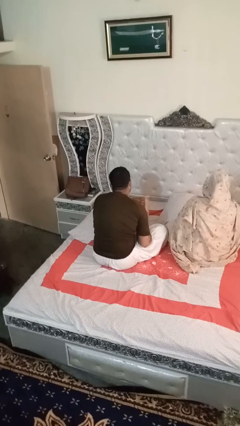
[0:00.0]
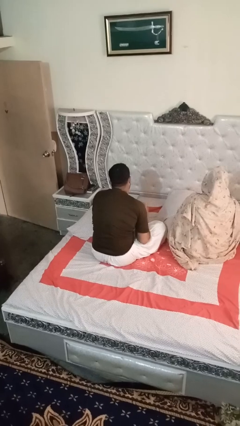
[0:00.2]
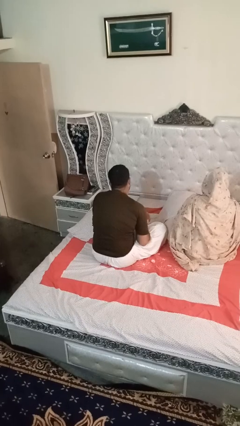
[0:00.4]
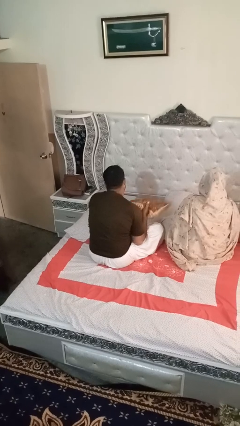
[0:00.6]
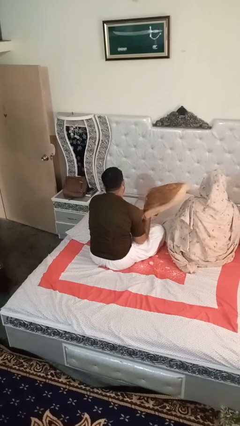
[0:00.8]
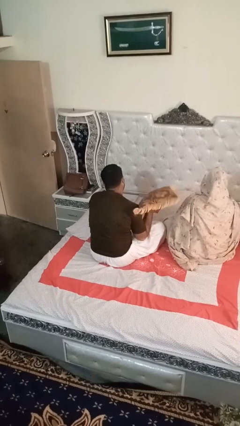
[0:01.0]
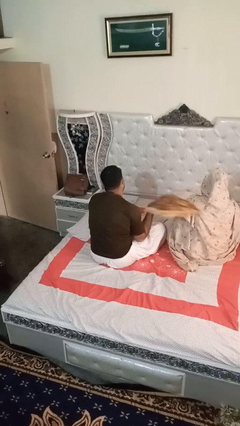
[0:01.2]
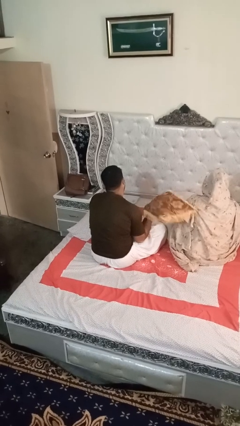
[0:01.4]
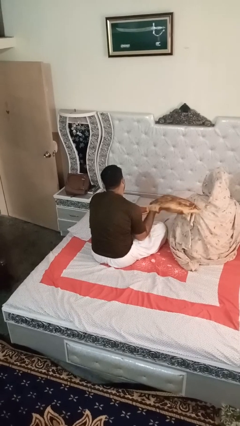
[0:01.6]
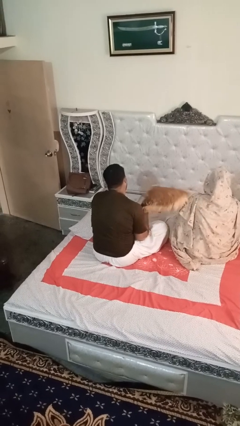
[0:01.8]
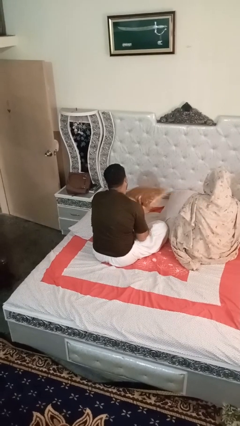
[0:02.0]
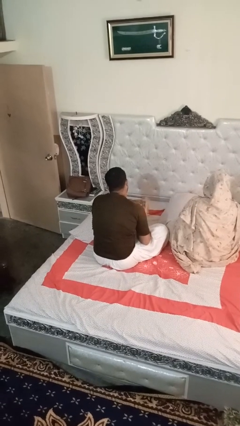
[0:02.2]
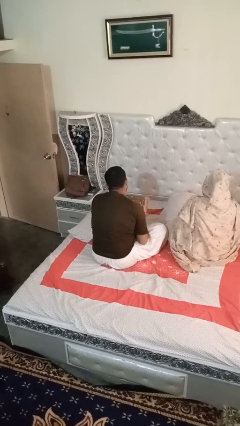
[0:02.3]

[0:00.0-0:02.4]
person hits person with pillow

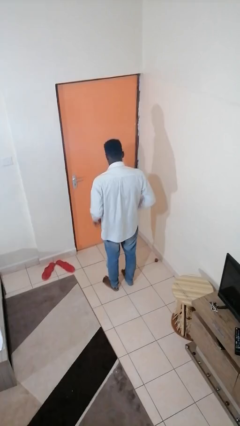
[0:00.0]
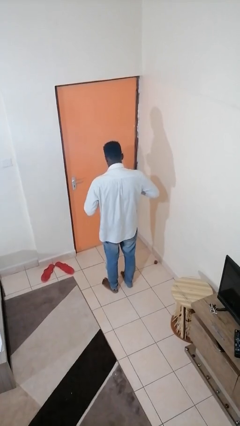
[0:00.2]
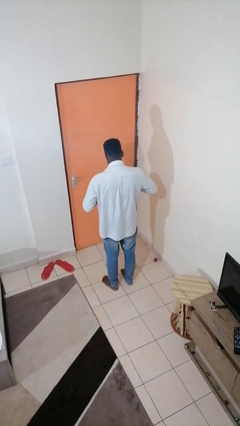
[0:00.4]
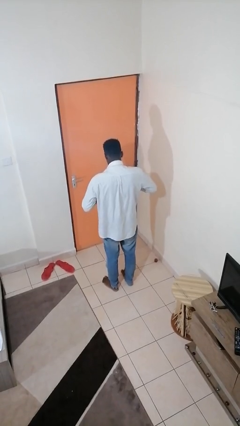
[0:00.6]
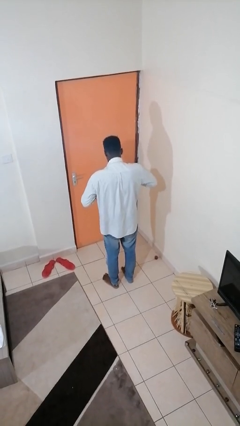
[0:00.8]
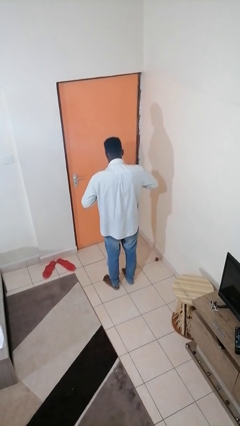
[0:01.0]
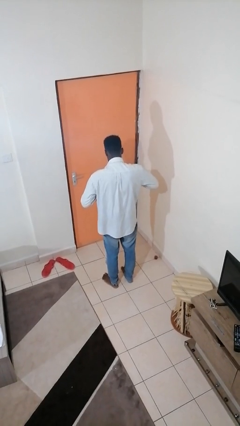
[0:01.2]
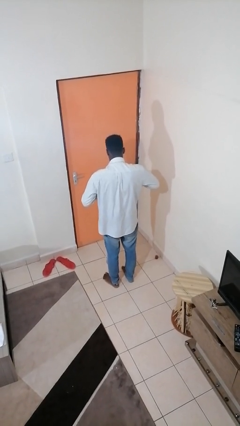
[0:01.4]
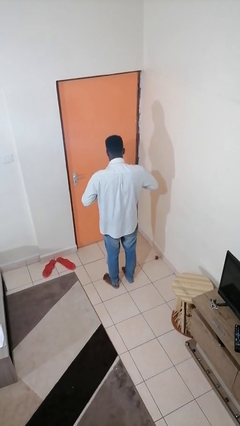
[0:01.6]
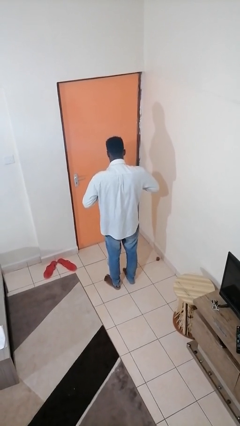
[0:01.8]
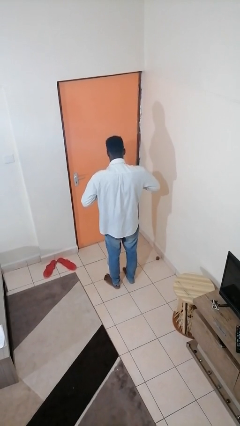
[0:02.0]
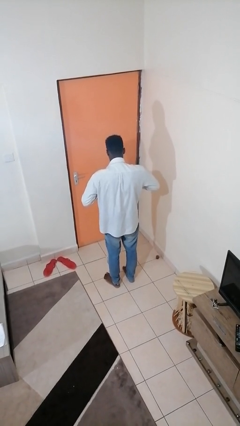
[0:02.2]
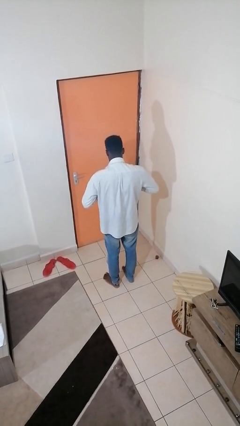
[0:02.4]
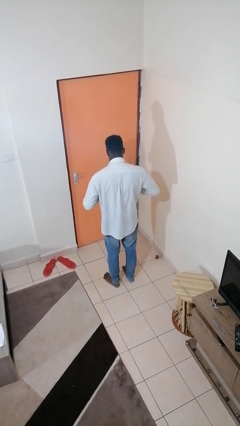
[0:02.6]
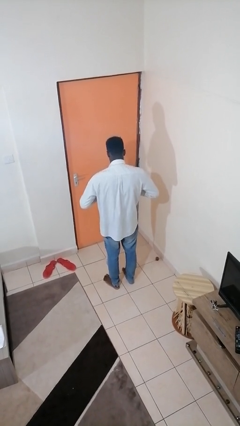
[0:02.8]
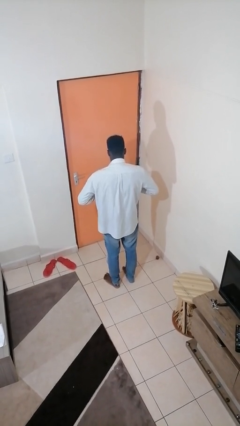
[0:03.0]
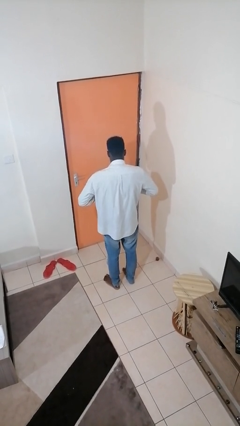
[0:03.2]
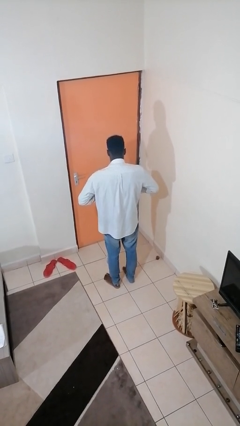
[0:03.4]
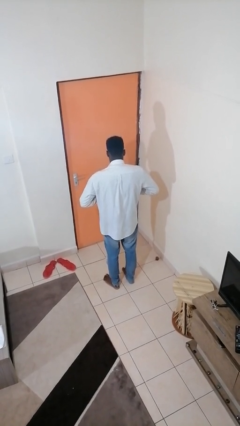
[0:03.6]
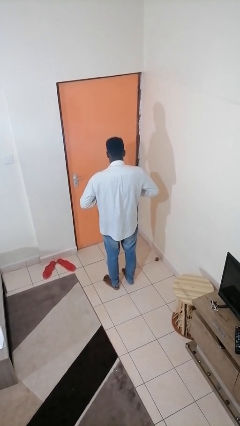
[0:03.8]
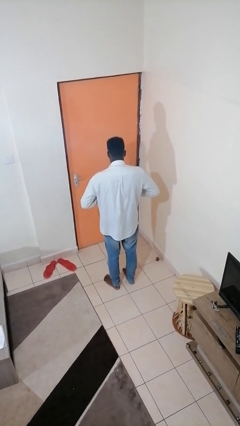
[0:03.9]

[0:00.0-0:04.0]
person buttons shirt

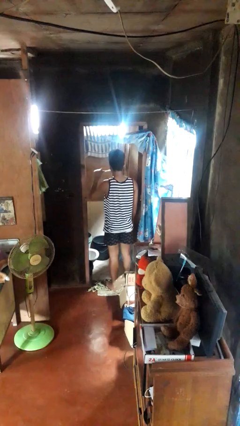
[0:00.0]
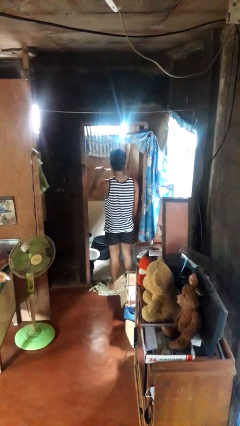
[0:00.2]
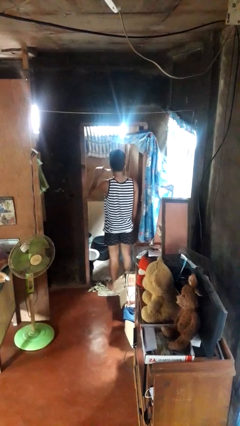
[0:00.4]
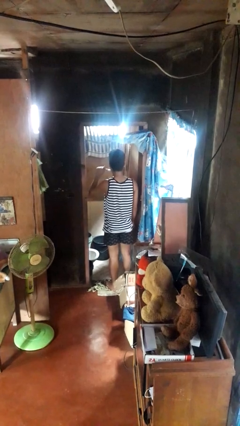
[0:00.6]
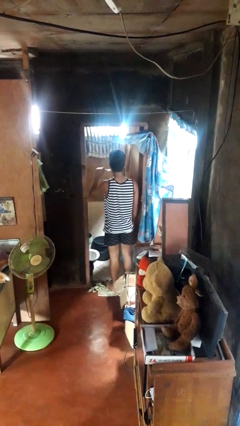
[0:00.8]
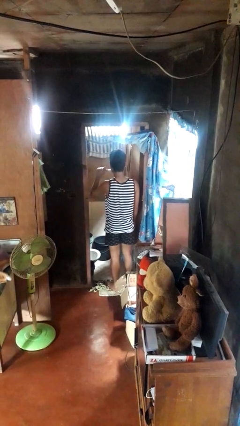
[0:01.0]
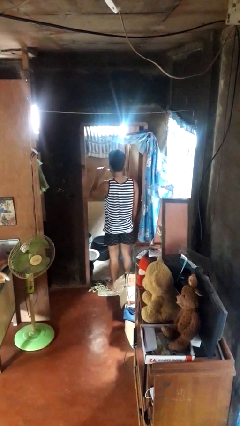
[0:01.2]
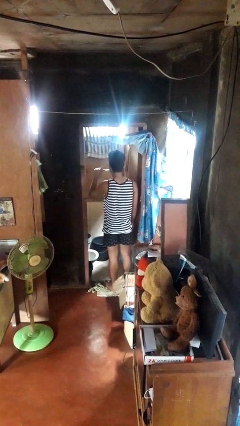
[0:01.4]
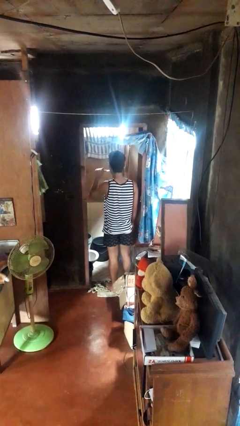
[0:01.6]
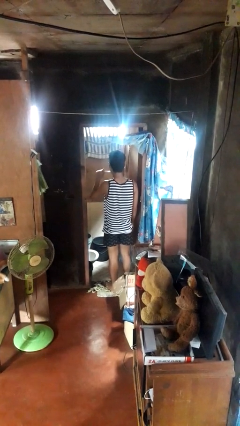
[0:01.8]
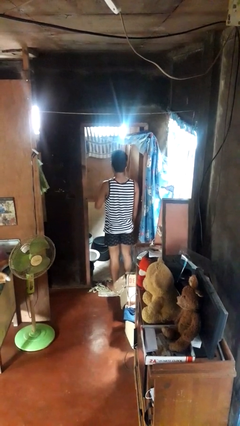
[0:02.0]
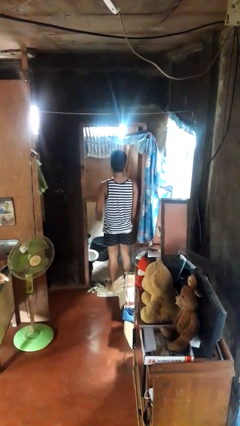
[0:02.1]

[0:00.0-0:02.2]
person brushes teeth

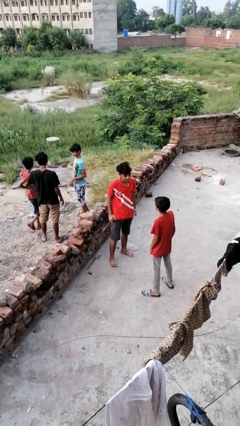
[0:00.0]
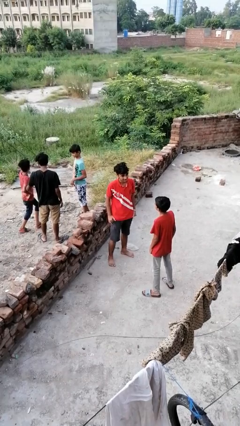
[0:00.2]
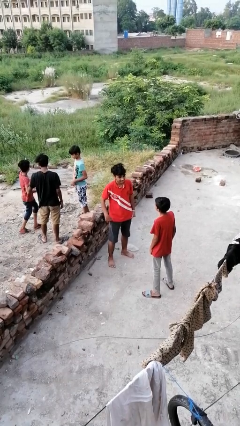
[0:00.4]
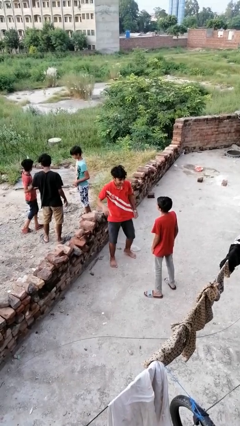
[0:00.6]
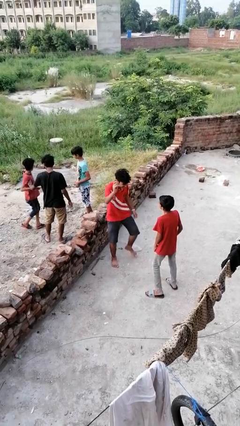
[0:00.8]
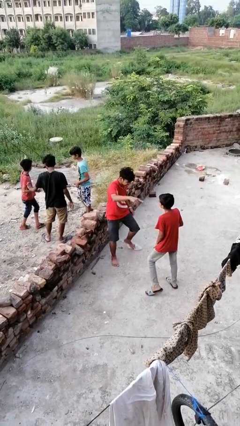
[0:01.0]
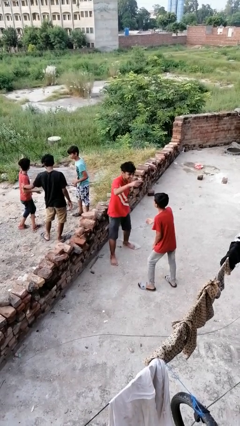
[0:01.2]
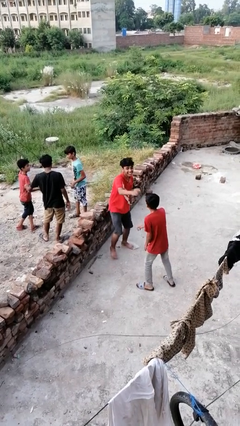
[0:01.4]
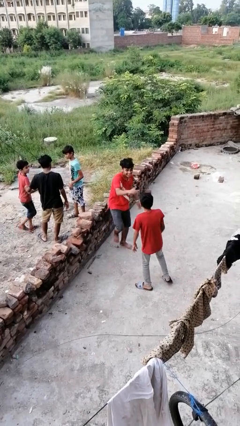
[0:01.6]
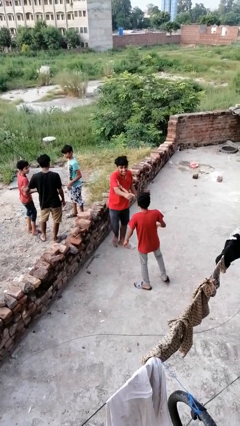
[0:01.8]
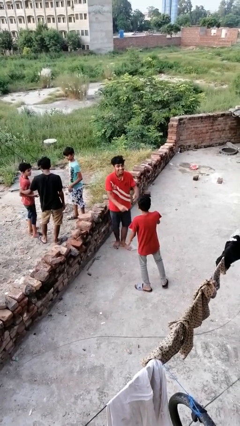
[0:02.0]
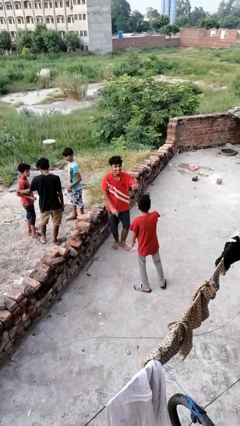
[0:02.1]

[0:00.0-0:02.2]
person laughs with person

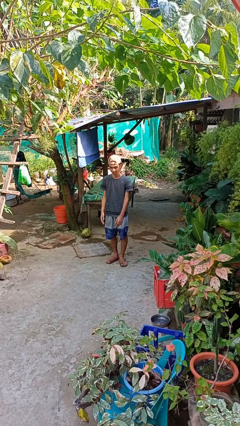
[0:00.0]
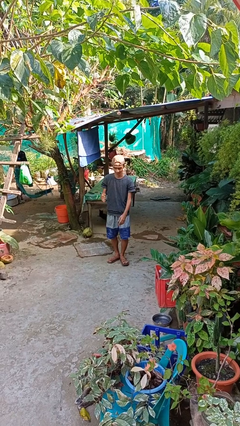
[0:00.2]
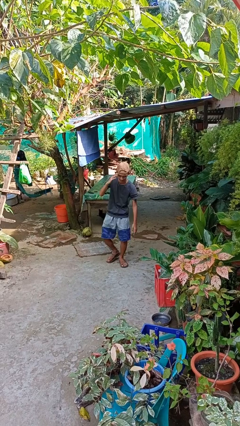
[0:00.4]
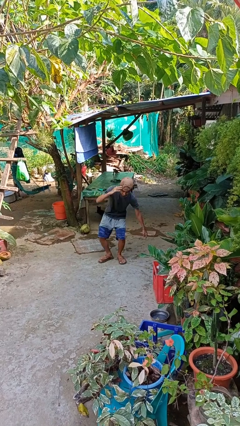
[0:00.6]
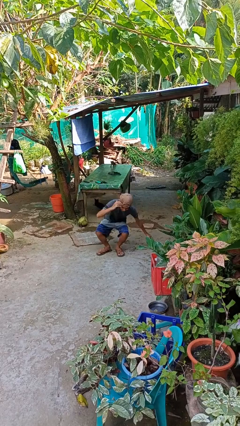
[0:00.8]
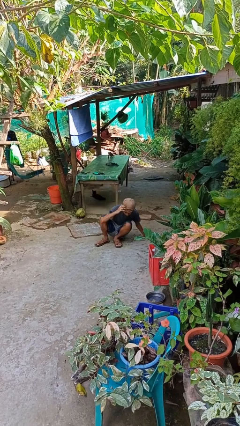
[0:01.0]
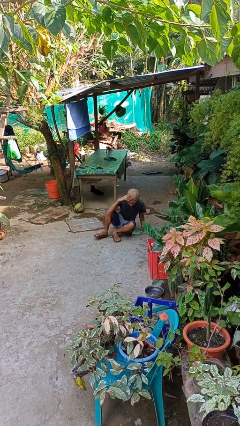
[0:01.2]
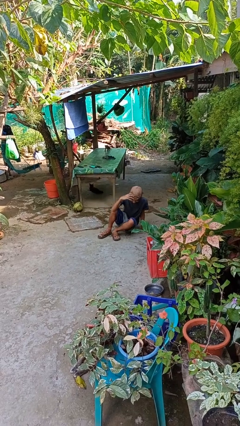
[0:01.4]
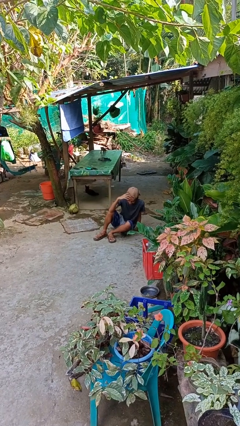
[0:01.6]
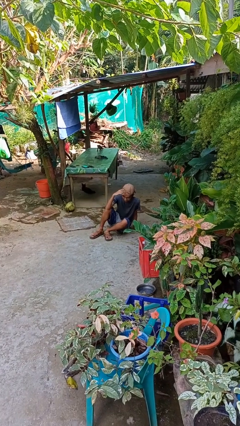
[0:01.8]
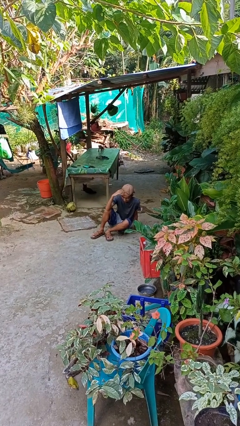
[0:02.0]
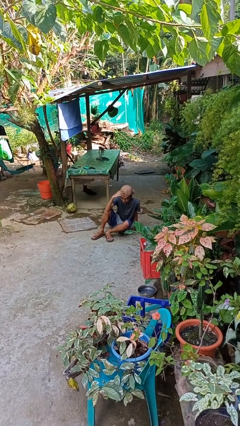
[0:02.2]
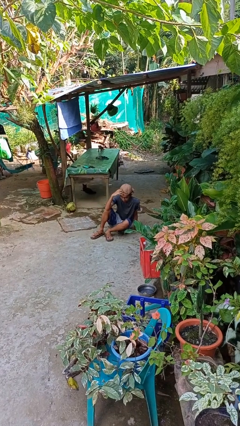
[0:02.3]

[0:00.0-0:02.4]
person falls while standing

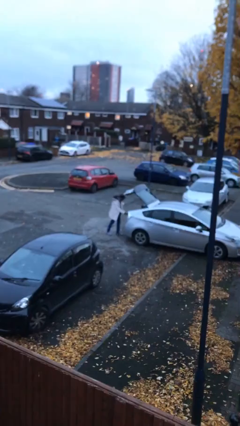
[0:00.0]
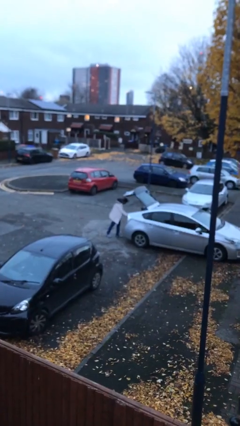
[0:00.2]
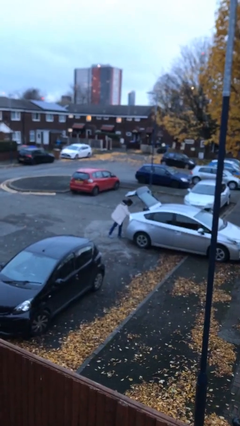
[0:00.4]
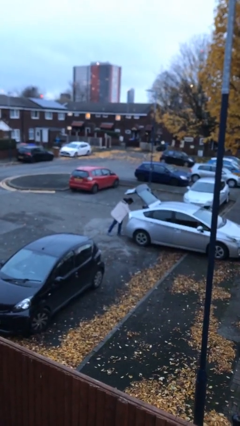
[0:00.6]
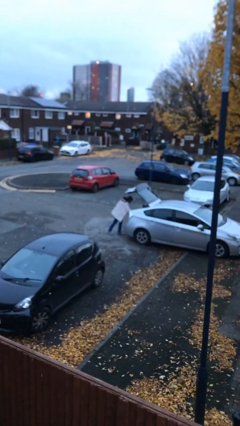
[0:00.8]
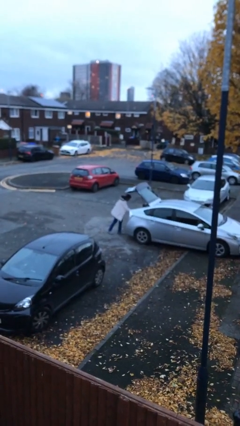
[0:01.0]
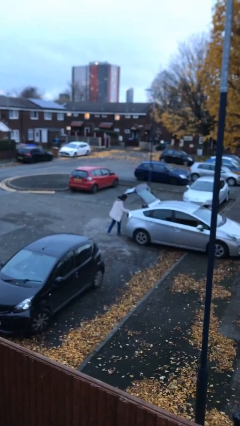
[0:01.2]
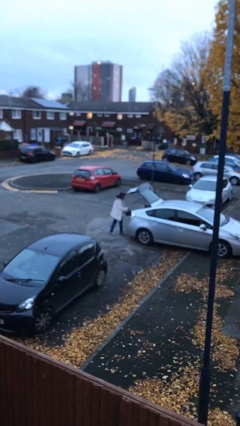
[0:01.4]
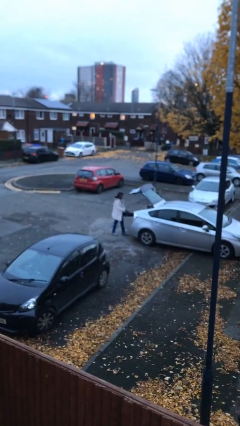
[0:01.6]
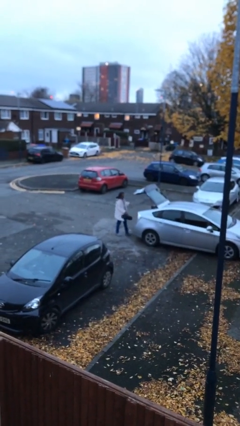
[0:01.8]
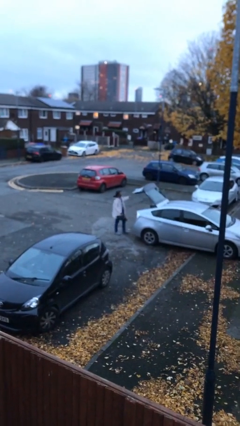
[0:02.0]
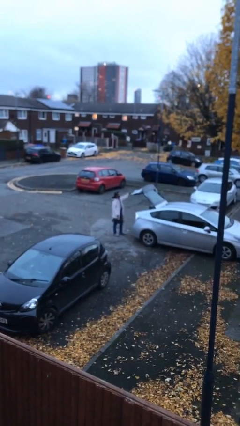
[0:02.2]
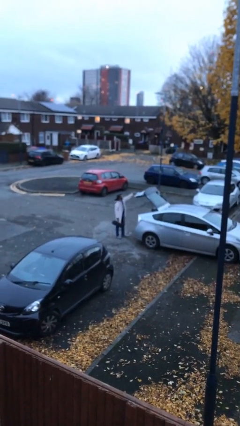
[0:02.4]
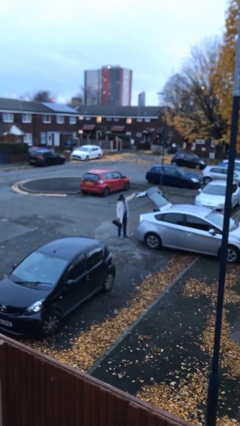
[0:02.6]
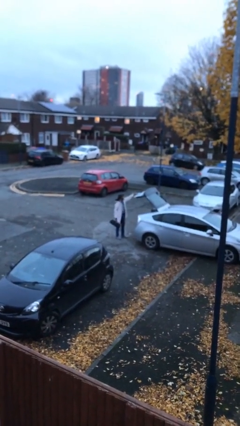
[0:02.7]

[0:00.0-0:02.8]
person unloads car

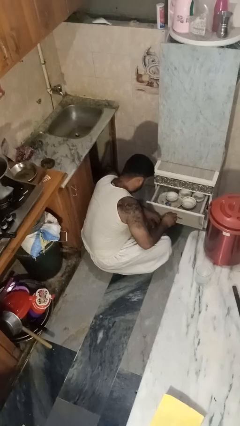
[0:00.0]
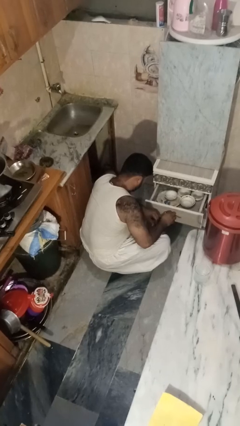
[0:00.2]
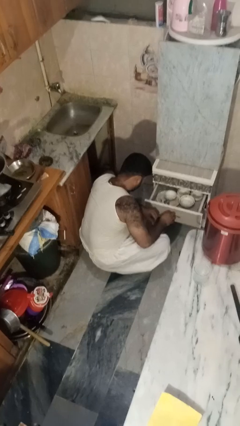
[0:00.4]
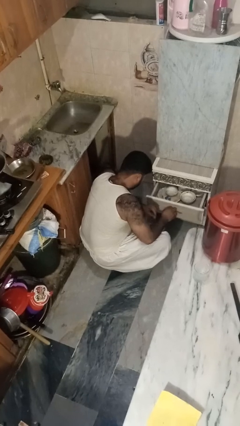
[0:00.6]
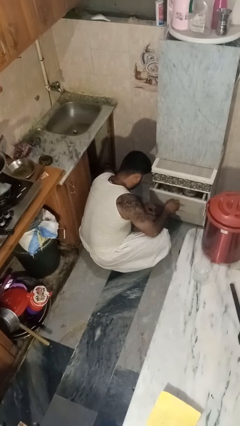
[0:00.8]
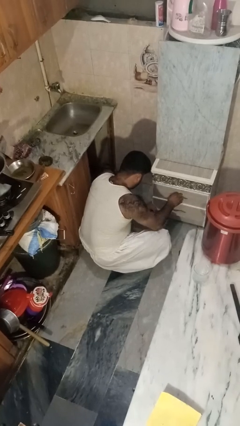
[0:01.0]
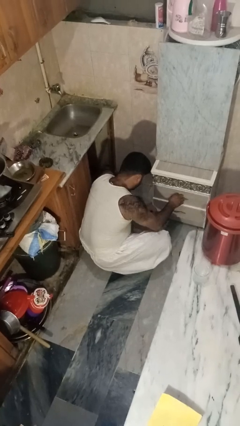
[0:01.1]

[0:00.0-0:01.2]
person closes kitchen drawer
